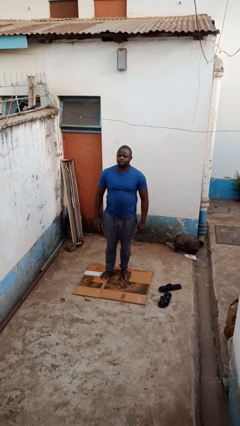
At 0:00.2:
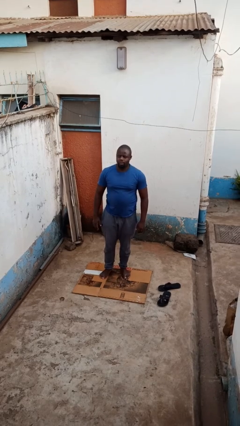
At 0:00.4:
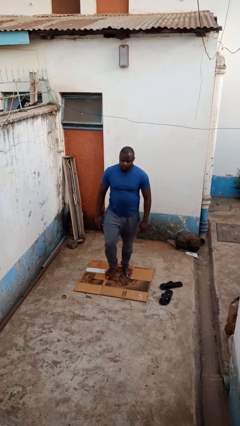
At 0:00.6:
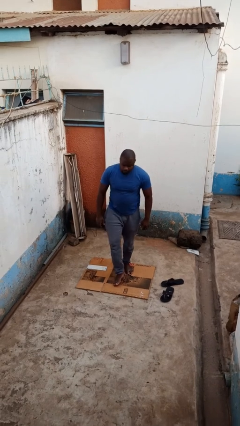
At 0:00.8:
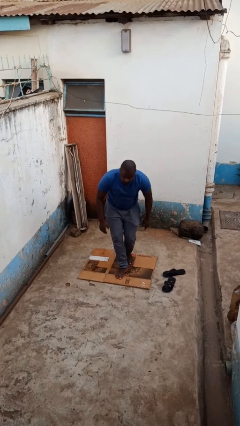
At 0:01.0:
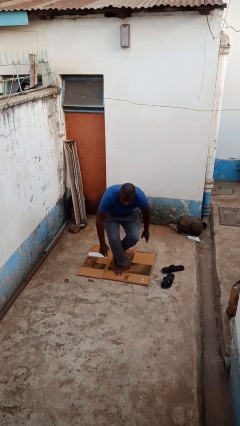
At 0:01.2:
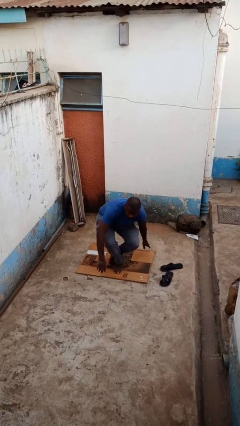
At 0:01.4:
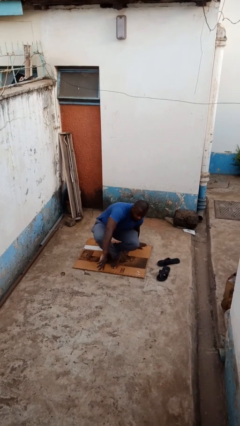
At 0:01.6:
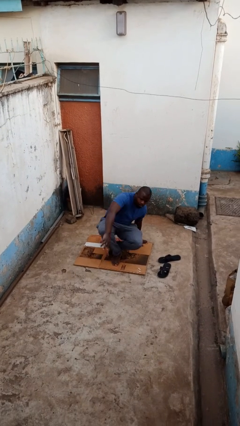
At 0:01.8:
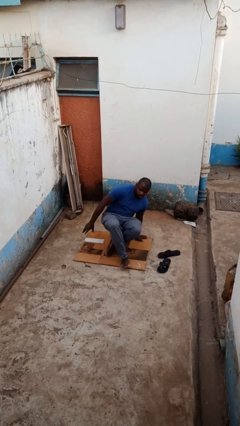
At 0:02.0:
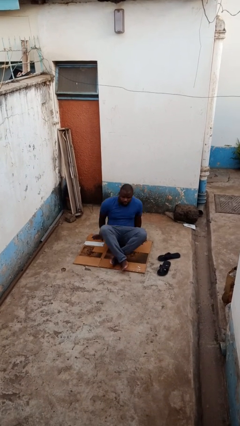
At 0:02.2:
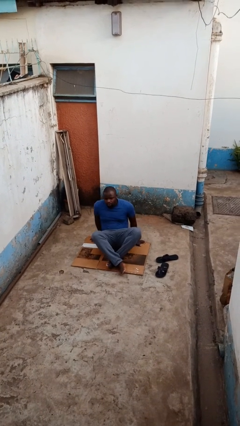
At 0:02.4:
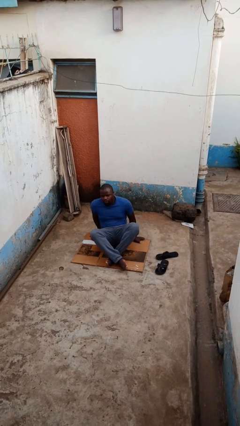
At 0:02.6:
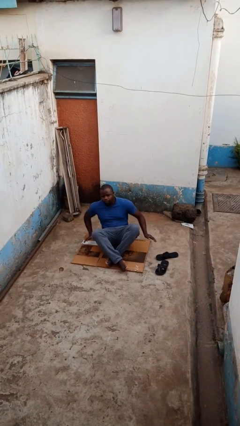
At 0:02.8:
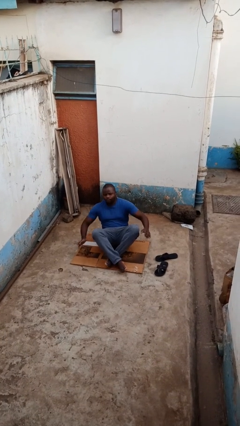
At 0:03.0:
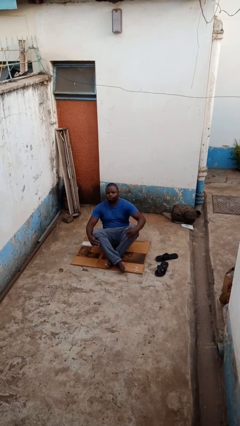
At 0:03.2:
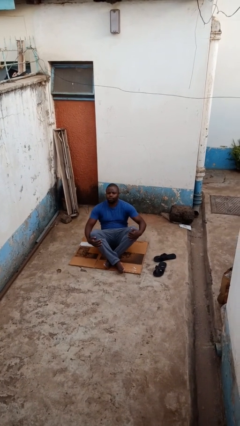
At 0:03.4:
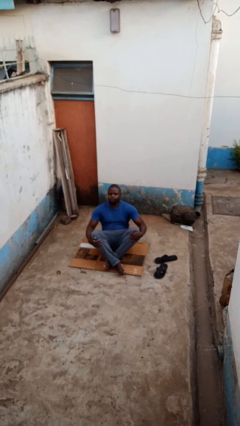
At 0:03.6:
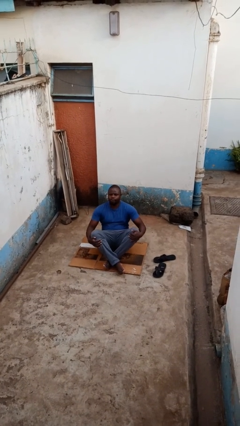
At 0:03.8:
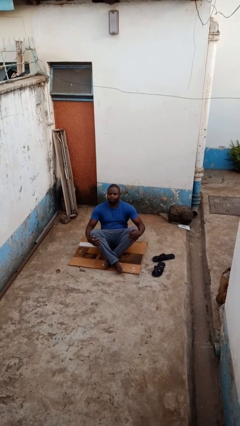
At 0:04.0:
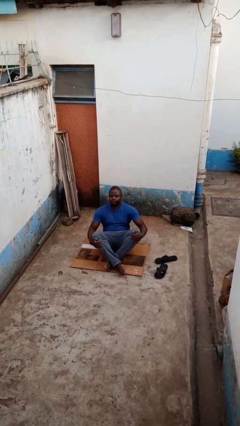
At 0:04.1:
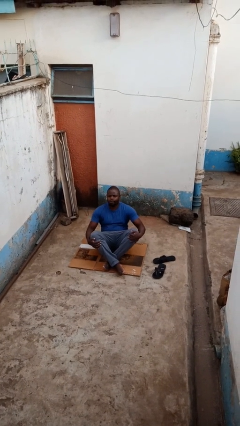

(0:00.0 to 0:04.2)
person sits crisscross

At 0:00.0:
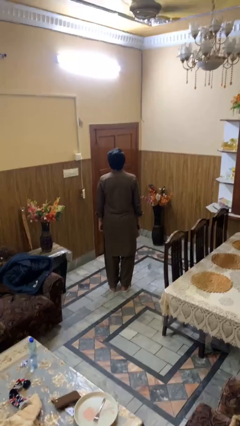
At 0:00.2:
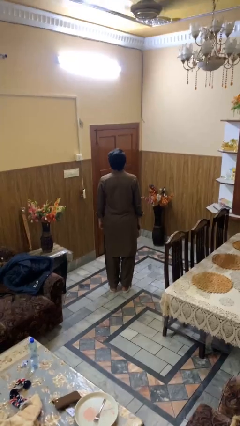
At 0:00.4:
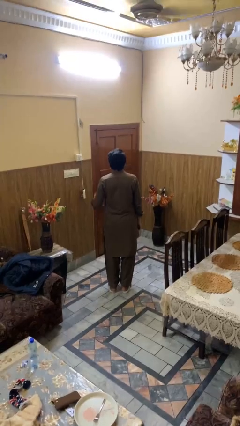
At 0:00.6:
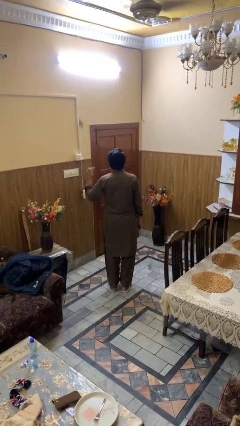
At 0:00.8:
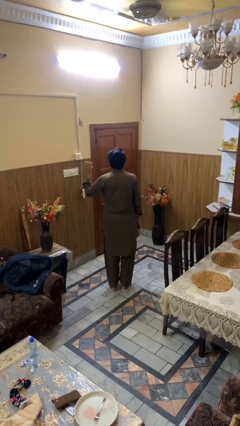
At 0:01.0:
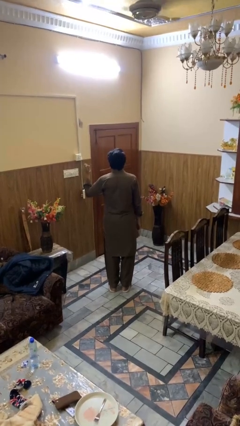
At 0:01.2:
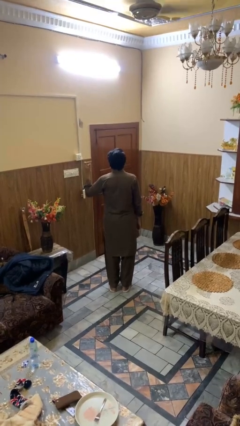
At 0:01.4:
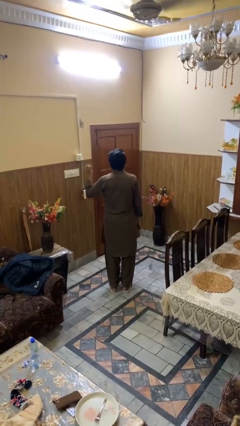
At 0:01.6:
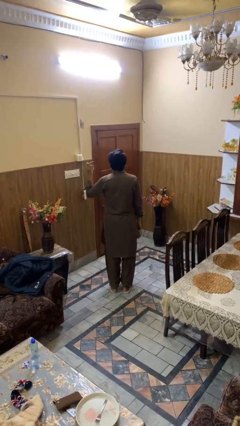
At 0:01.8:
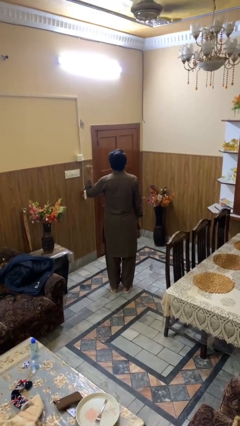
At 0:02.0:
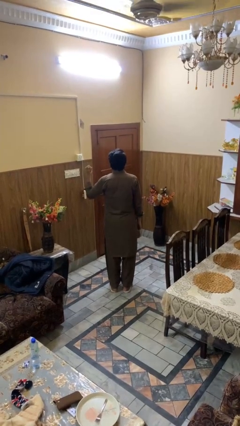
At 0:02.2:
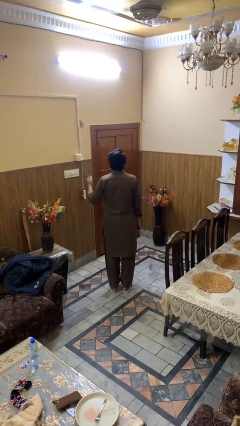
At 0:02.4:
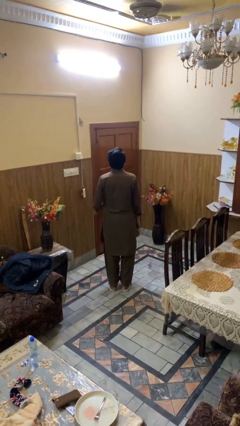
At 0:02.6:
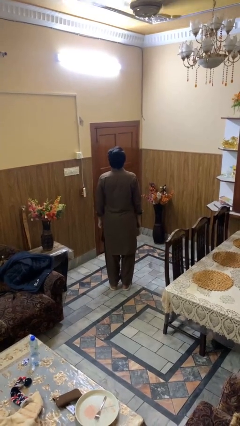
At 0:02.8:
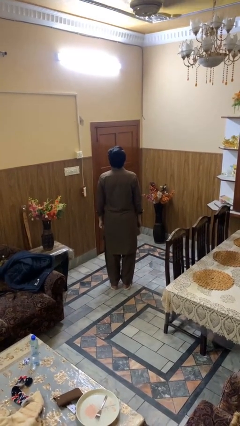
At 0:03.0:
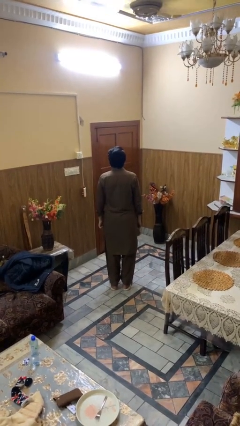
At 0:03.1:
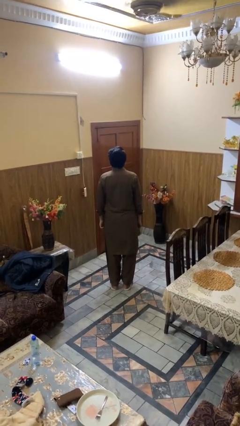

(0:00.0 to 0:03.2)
person snaps fingers

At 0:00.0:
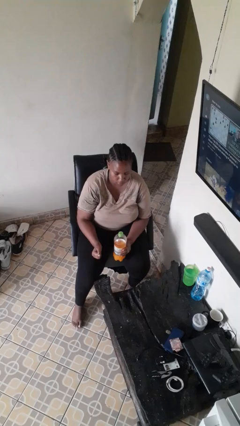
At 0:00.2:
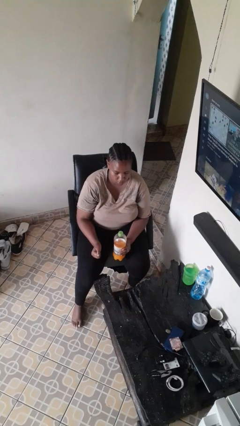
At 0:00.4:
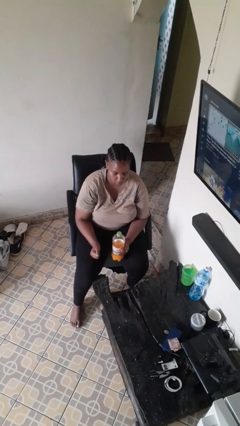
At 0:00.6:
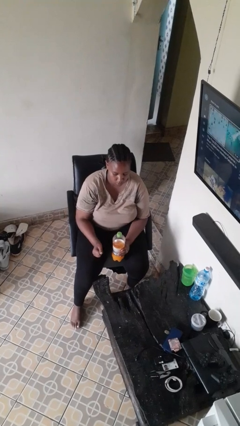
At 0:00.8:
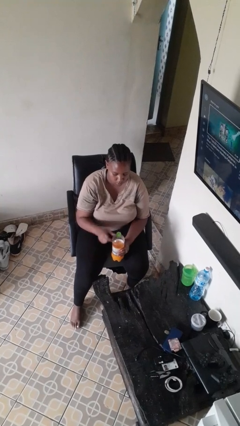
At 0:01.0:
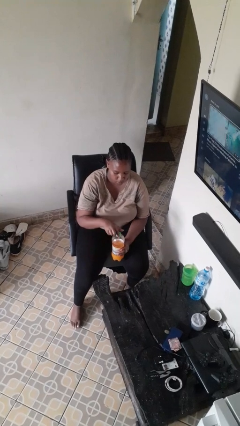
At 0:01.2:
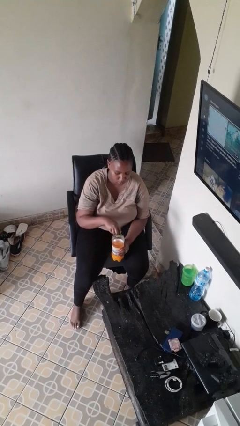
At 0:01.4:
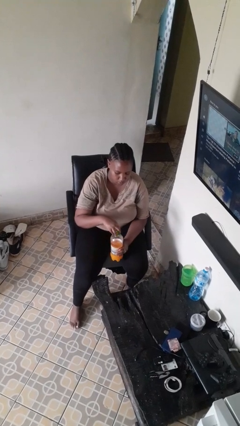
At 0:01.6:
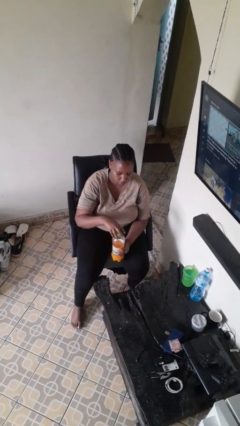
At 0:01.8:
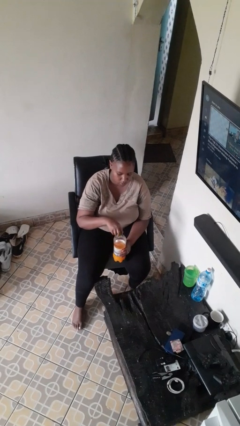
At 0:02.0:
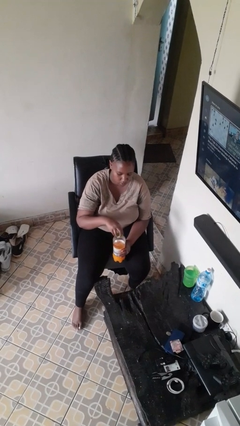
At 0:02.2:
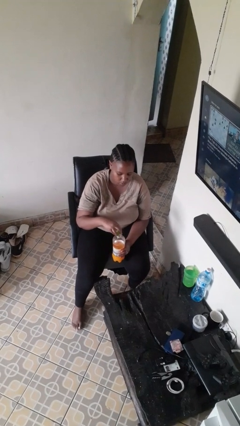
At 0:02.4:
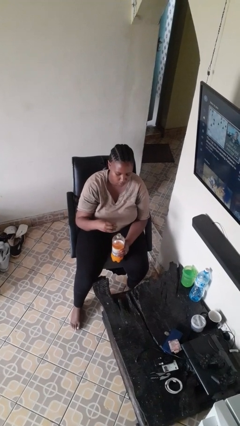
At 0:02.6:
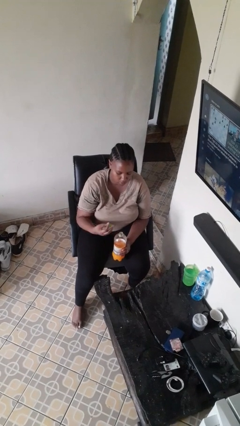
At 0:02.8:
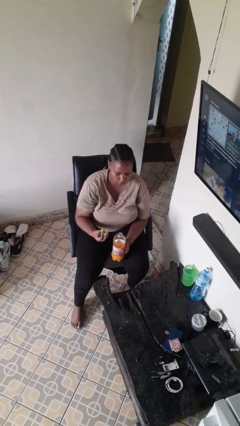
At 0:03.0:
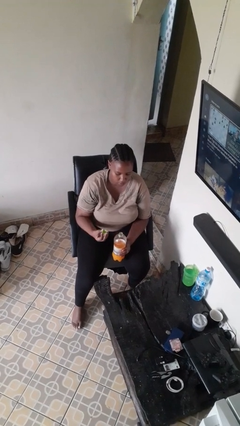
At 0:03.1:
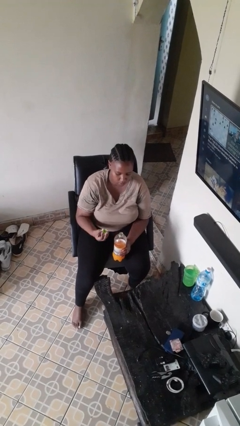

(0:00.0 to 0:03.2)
person unscrews lid from bottle

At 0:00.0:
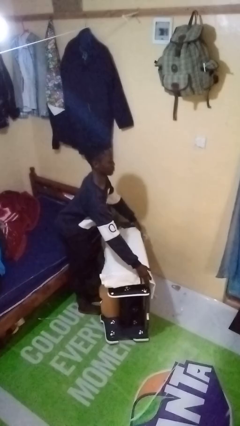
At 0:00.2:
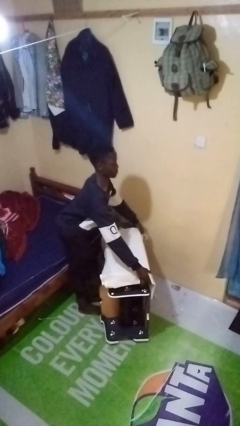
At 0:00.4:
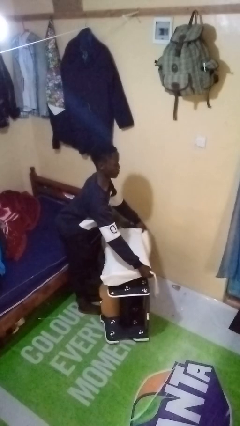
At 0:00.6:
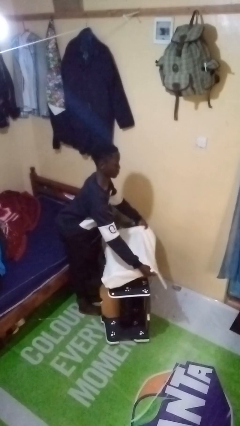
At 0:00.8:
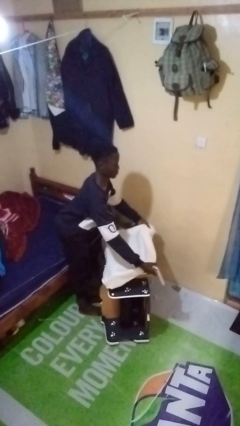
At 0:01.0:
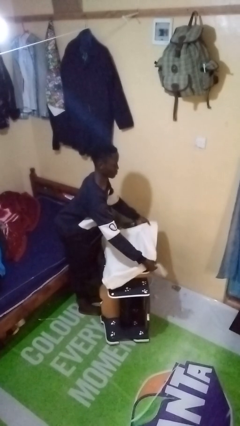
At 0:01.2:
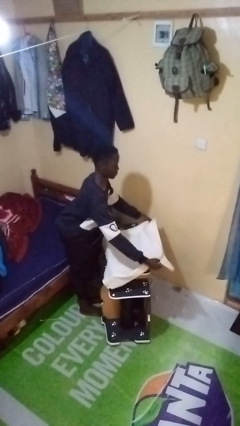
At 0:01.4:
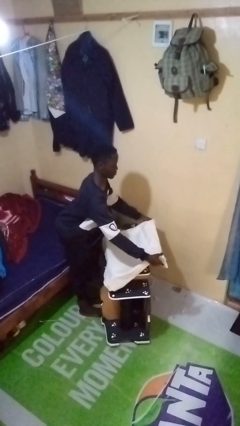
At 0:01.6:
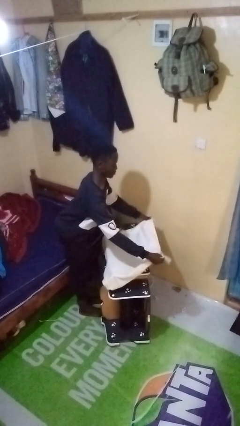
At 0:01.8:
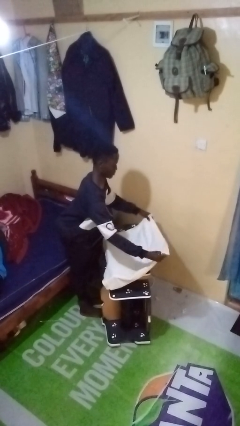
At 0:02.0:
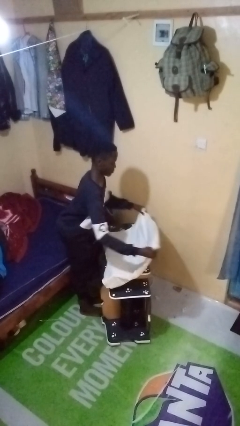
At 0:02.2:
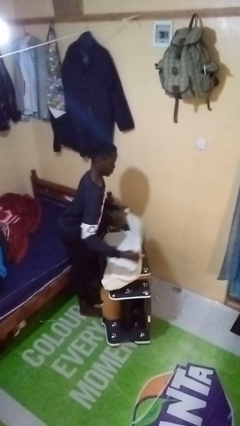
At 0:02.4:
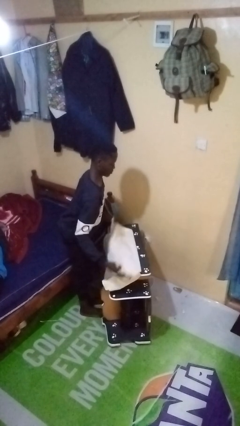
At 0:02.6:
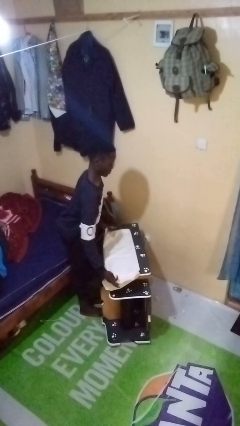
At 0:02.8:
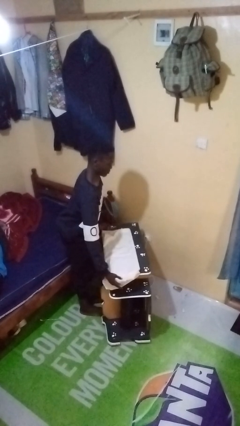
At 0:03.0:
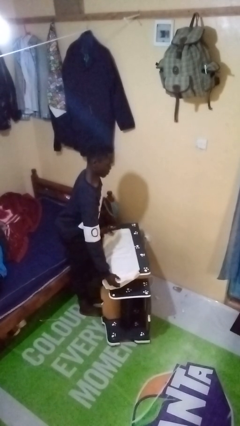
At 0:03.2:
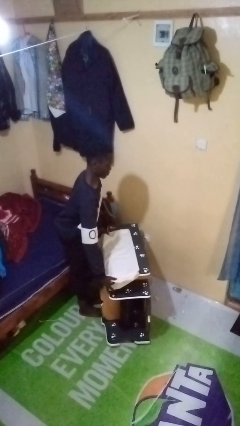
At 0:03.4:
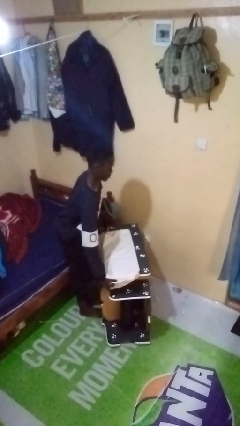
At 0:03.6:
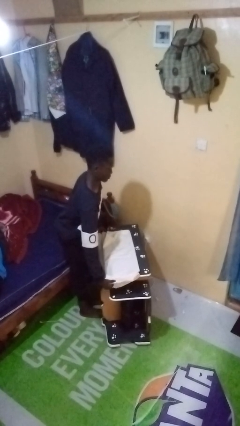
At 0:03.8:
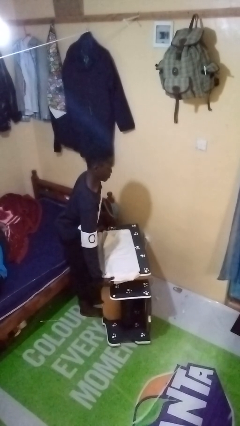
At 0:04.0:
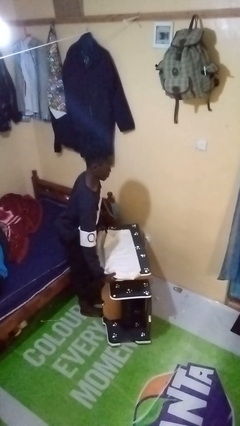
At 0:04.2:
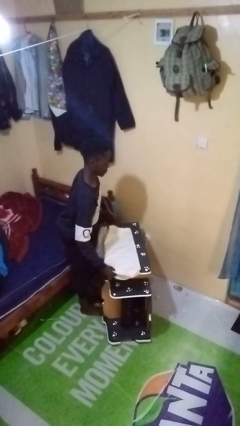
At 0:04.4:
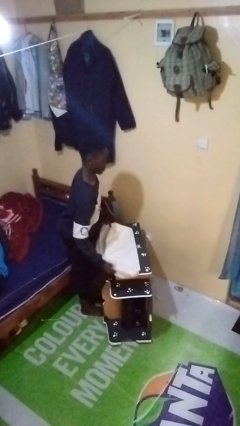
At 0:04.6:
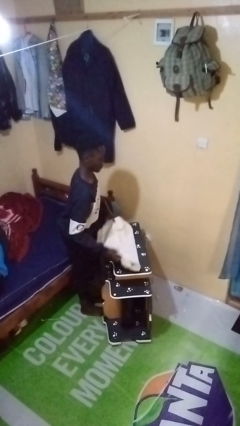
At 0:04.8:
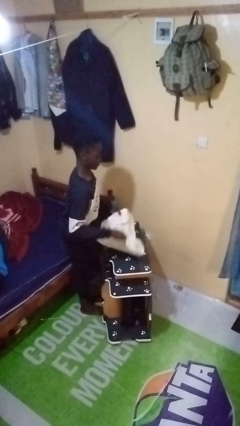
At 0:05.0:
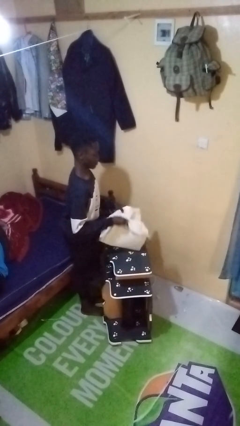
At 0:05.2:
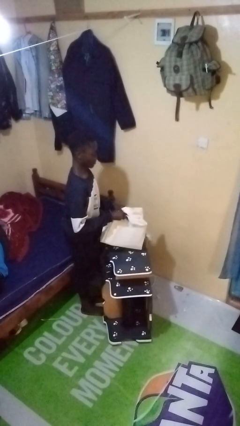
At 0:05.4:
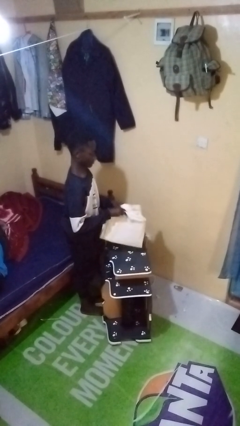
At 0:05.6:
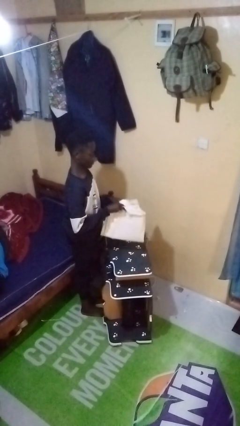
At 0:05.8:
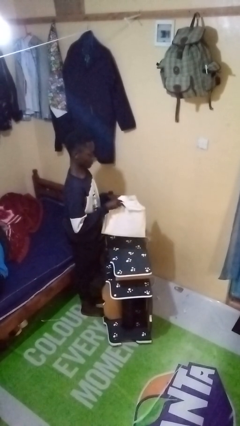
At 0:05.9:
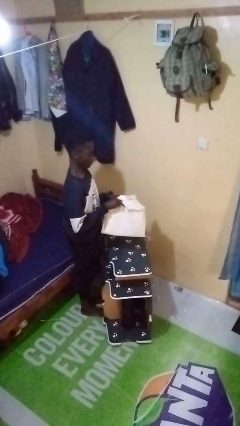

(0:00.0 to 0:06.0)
person folds tablecloth

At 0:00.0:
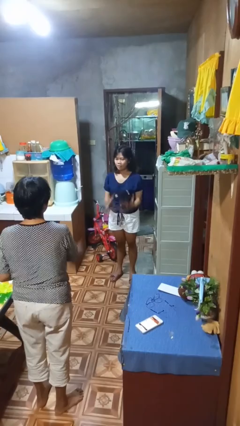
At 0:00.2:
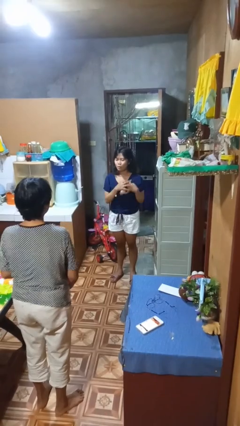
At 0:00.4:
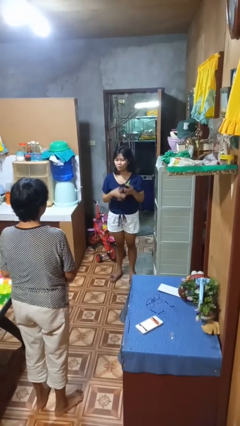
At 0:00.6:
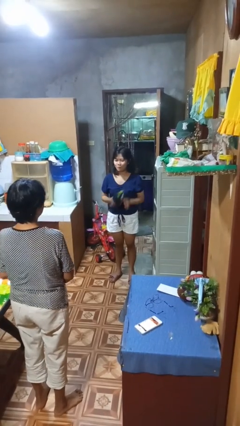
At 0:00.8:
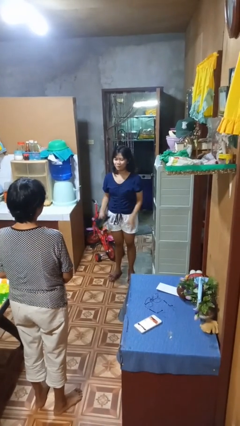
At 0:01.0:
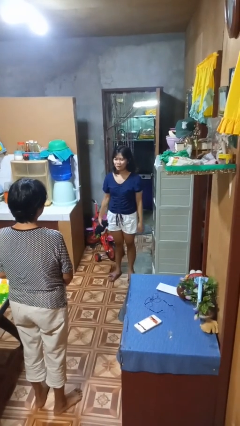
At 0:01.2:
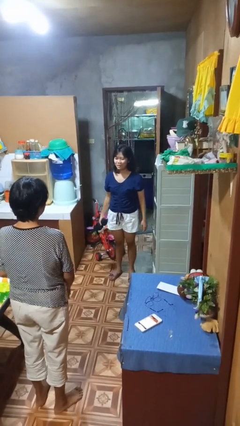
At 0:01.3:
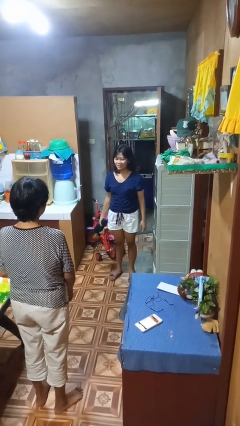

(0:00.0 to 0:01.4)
person catches object from person
